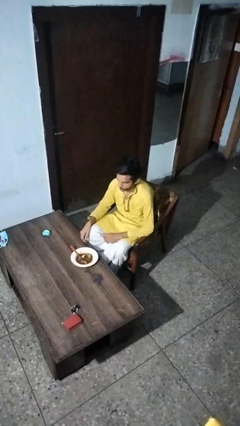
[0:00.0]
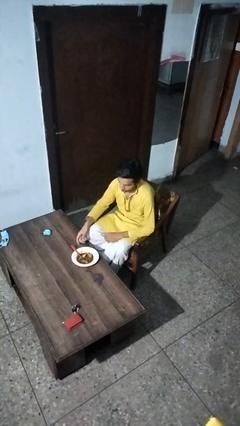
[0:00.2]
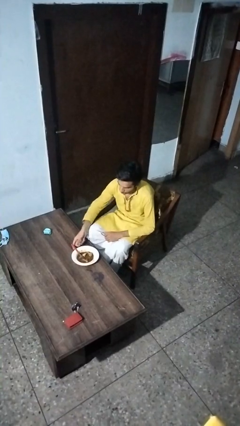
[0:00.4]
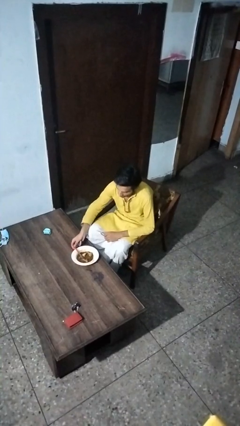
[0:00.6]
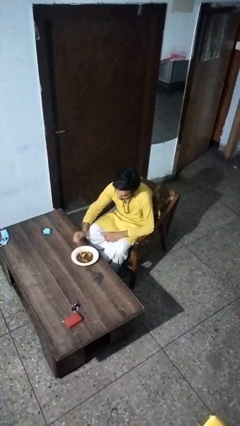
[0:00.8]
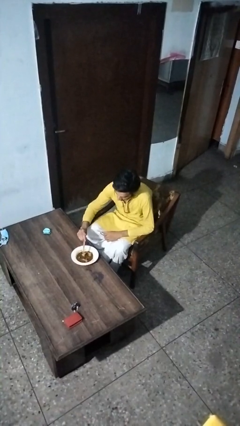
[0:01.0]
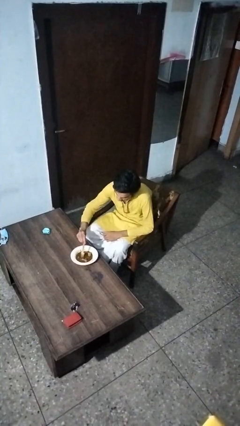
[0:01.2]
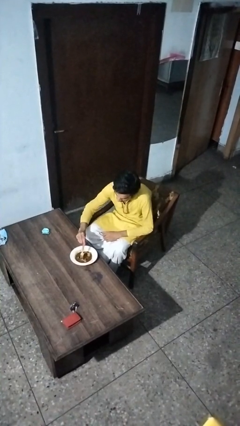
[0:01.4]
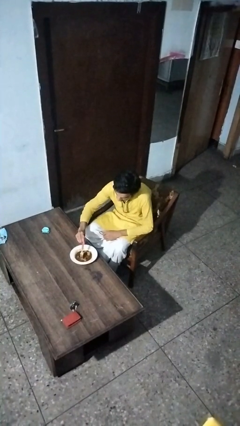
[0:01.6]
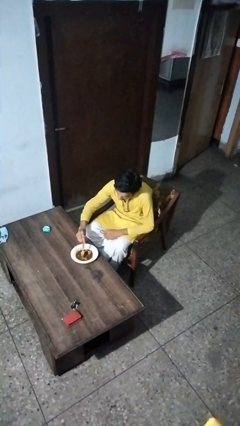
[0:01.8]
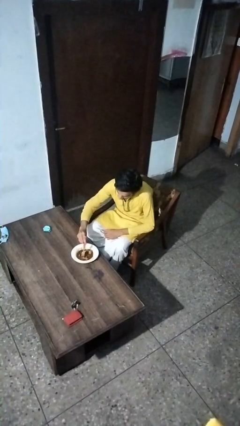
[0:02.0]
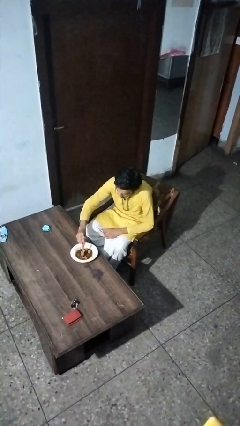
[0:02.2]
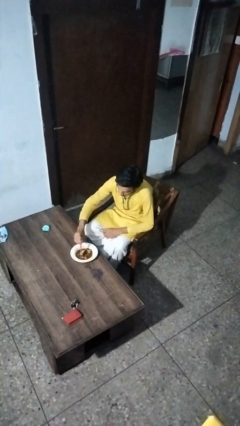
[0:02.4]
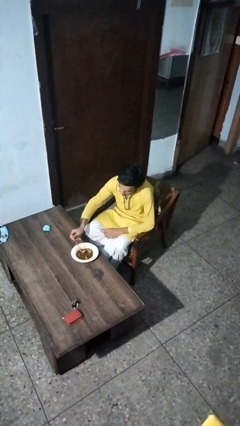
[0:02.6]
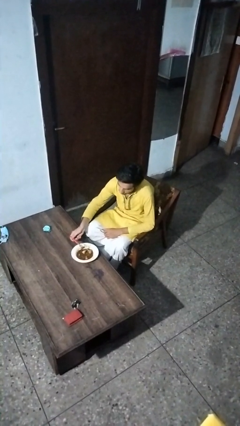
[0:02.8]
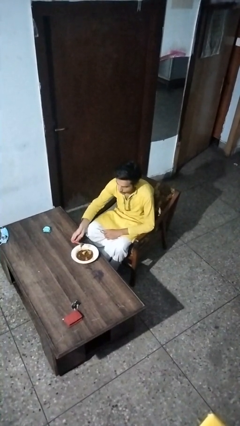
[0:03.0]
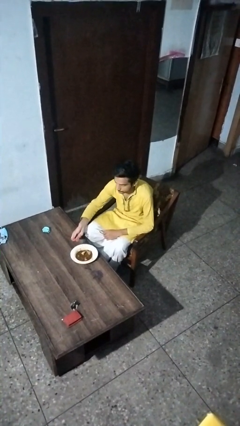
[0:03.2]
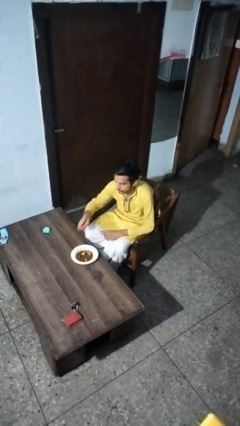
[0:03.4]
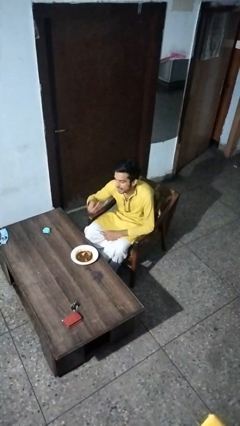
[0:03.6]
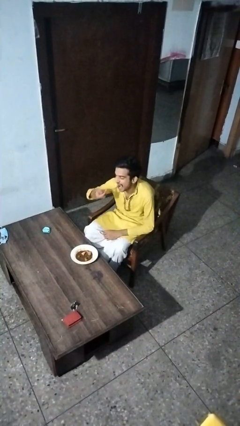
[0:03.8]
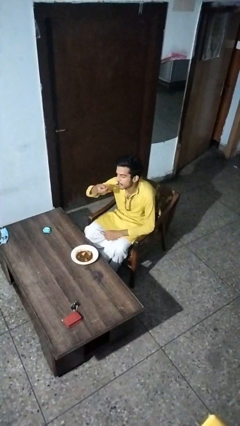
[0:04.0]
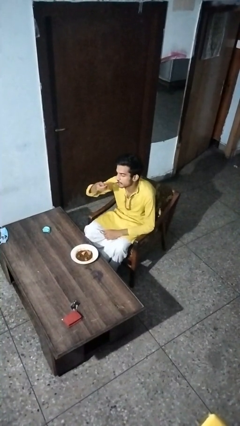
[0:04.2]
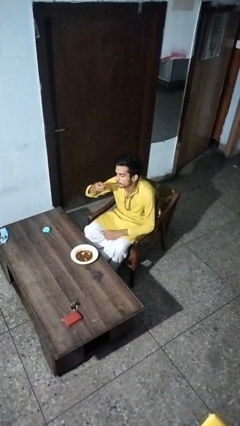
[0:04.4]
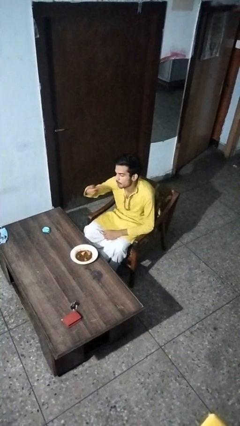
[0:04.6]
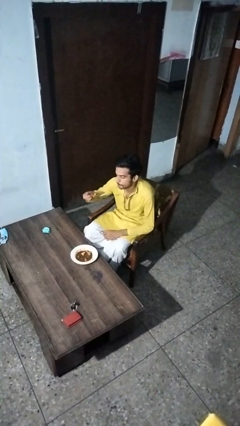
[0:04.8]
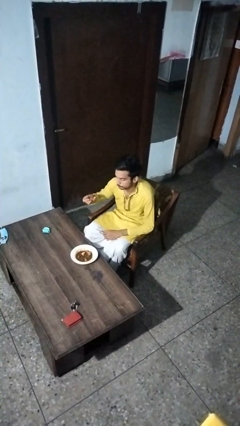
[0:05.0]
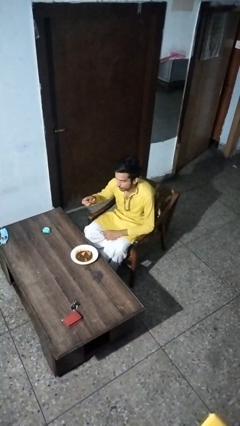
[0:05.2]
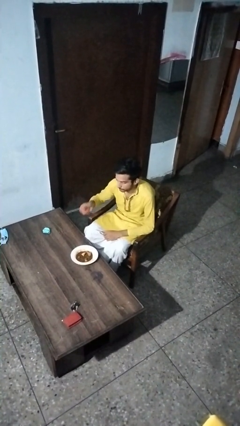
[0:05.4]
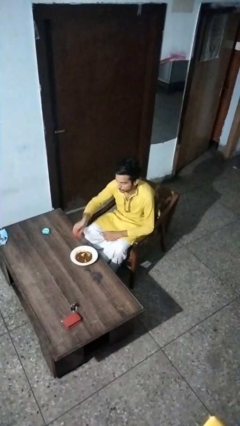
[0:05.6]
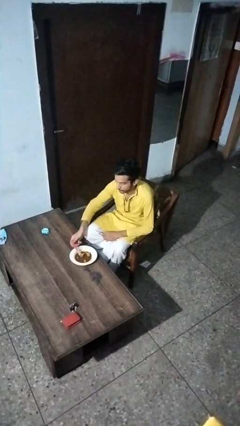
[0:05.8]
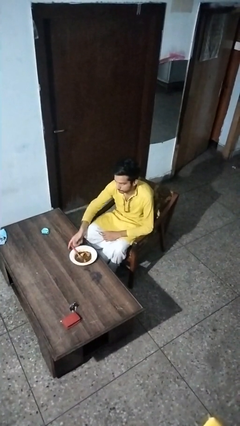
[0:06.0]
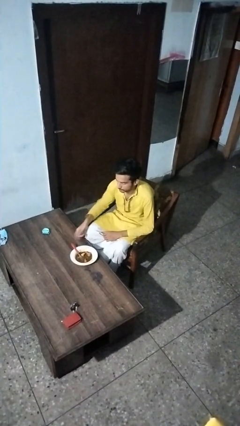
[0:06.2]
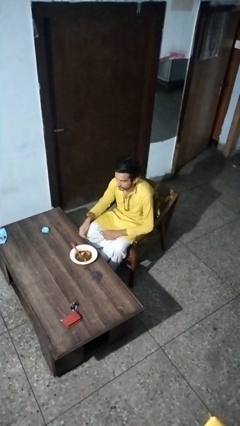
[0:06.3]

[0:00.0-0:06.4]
person eats with utensil

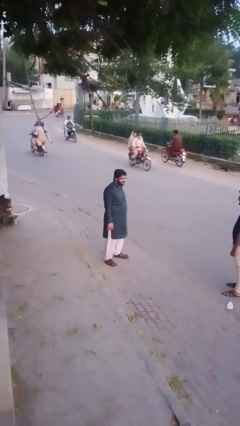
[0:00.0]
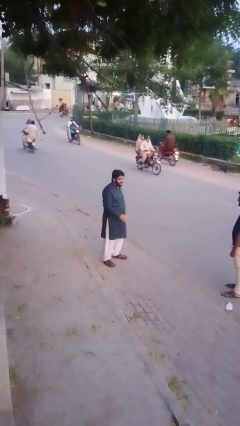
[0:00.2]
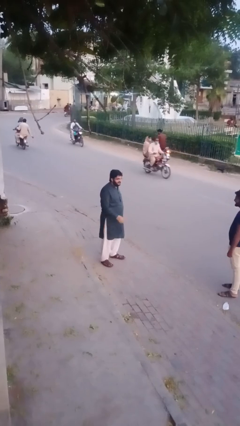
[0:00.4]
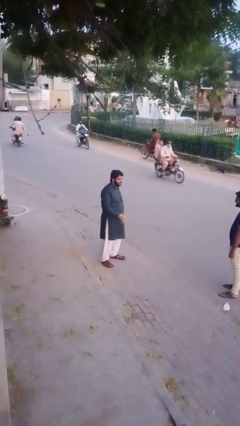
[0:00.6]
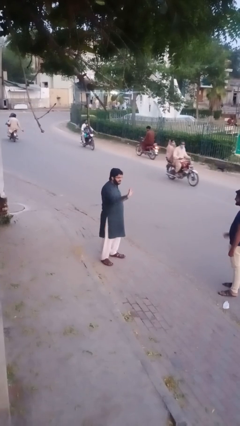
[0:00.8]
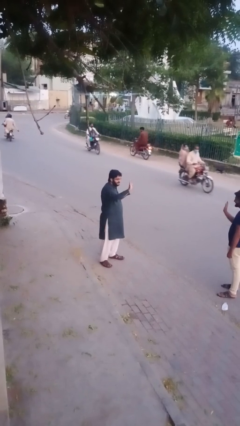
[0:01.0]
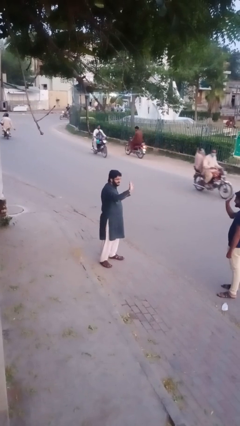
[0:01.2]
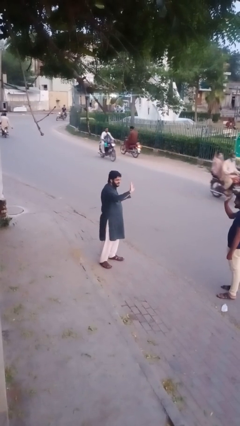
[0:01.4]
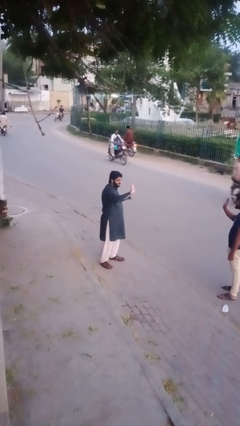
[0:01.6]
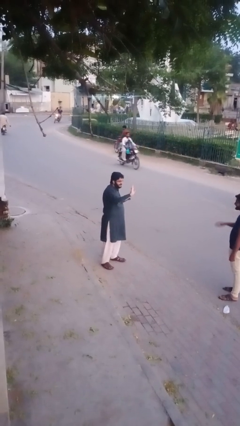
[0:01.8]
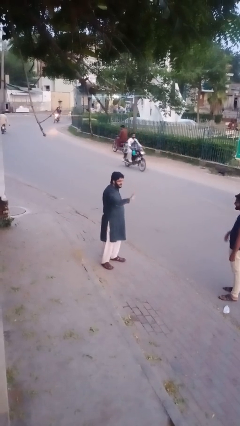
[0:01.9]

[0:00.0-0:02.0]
person waves at person

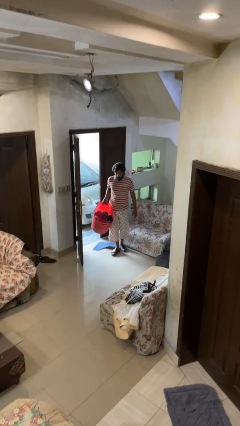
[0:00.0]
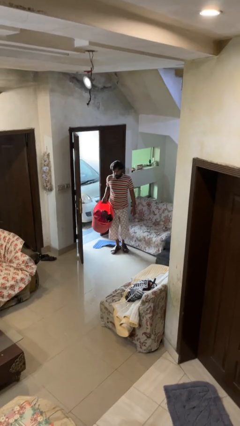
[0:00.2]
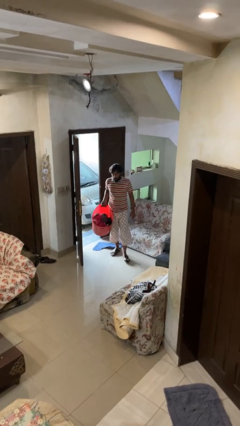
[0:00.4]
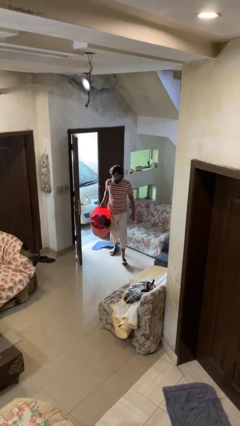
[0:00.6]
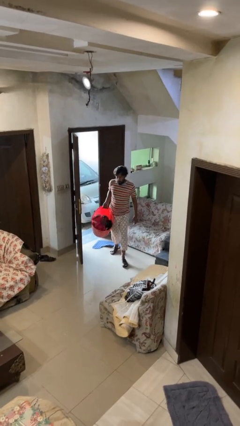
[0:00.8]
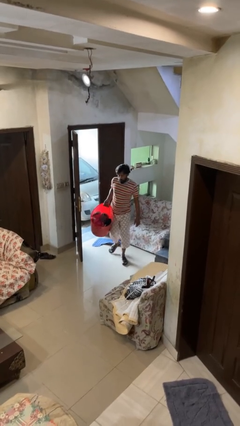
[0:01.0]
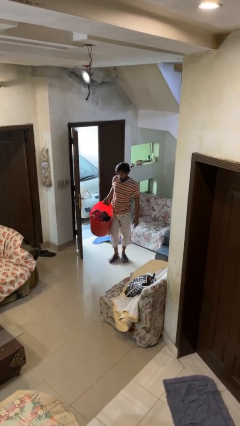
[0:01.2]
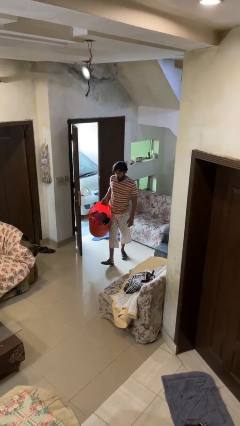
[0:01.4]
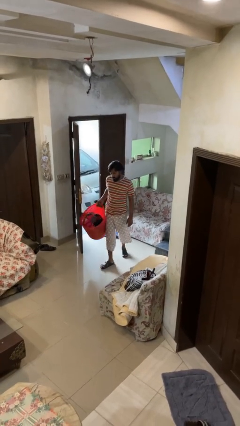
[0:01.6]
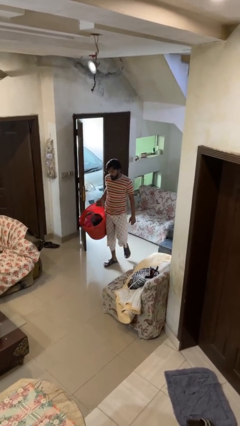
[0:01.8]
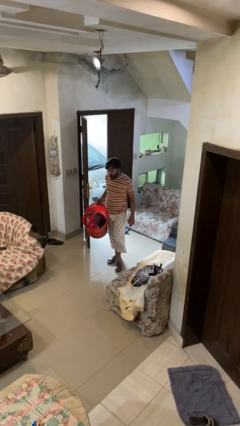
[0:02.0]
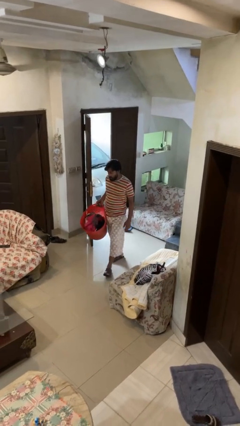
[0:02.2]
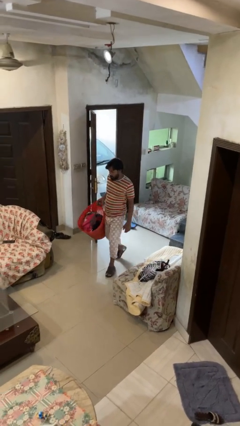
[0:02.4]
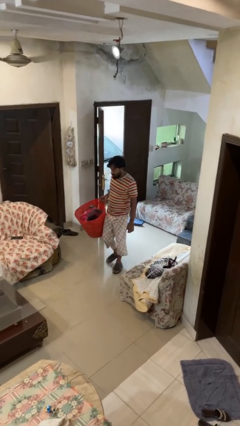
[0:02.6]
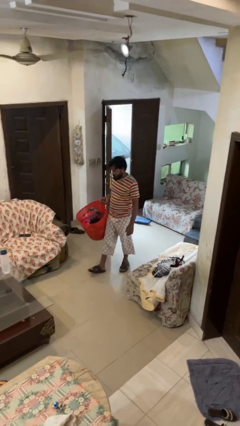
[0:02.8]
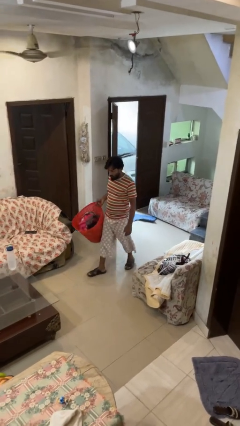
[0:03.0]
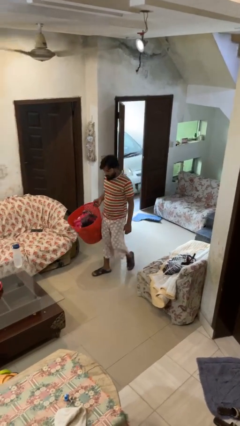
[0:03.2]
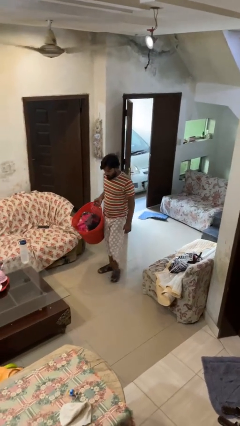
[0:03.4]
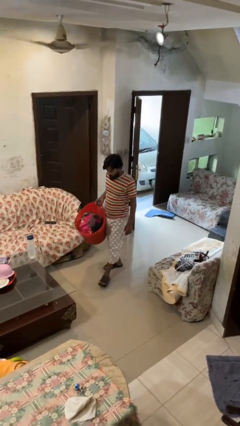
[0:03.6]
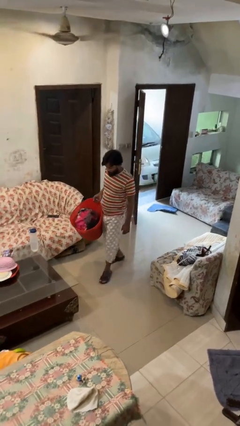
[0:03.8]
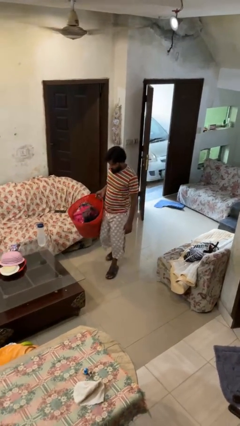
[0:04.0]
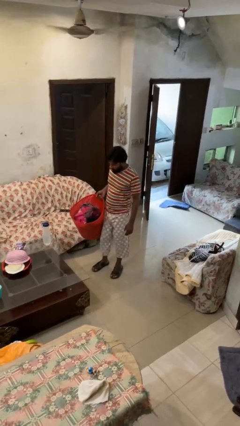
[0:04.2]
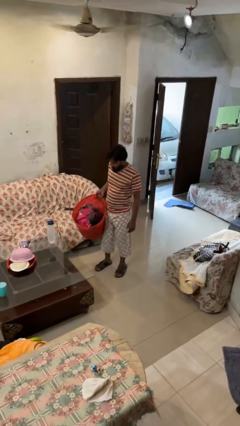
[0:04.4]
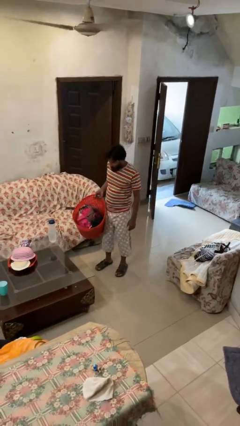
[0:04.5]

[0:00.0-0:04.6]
person carries laundry basket

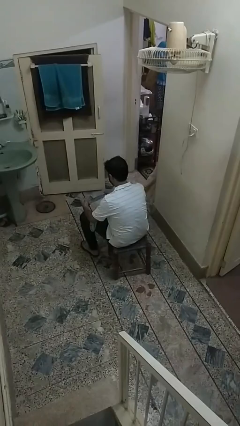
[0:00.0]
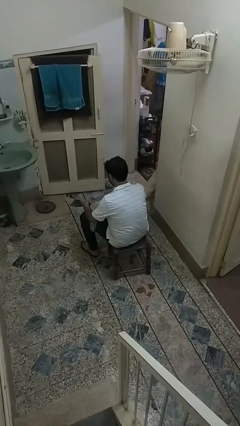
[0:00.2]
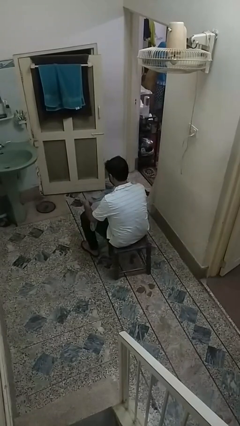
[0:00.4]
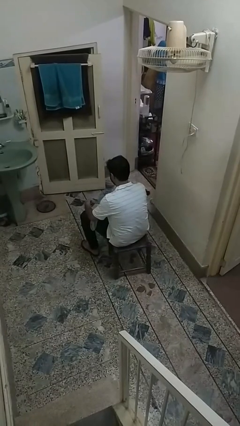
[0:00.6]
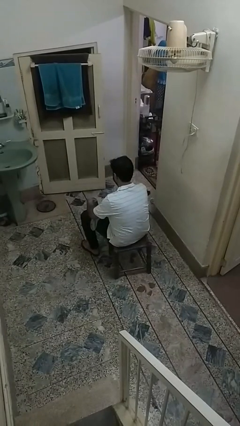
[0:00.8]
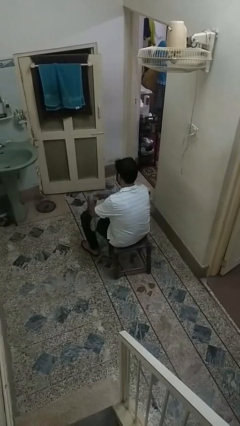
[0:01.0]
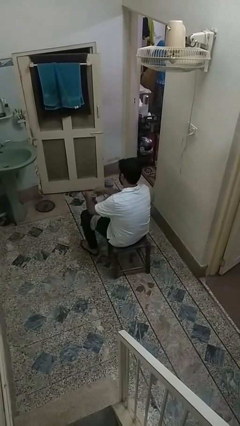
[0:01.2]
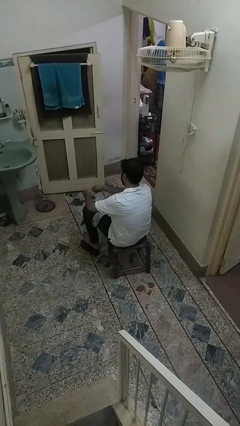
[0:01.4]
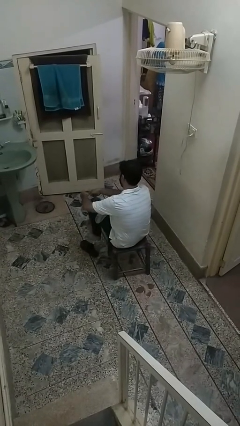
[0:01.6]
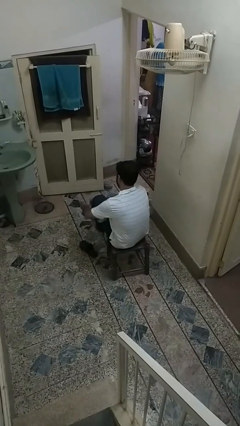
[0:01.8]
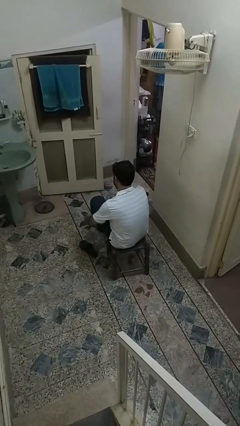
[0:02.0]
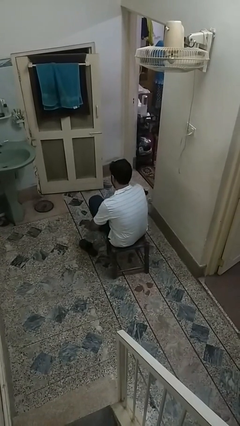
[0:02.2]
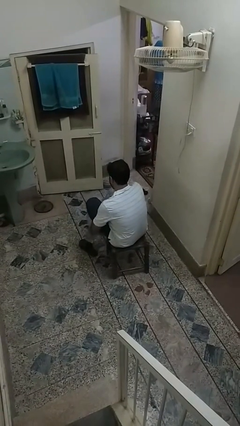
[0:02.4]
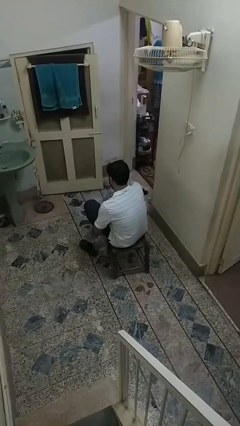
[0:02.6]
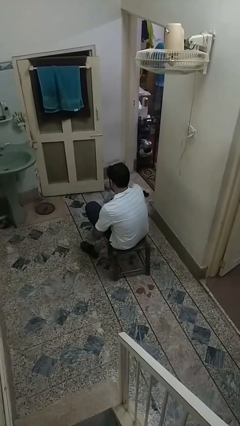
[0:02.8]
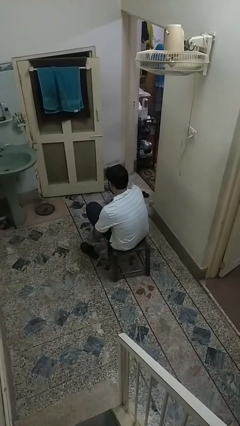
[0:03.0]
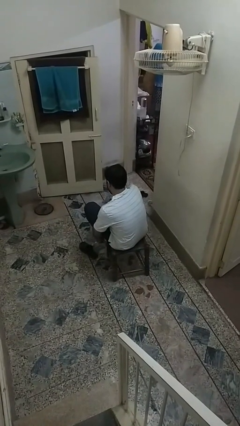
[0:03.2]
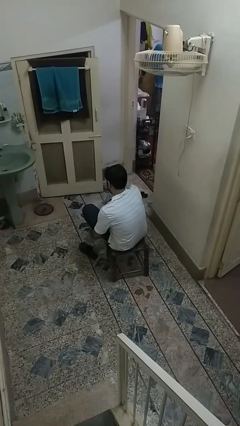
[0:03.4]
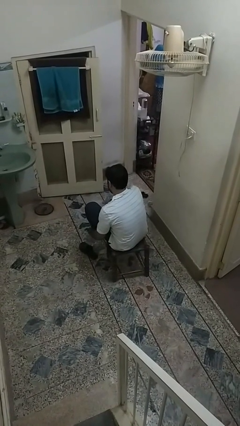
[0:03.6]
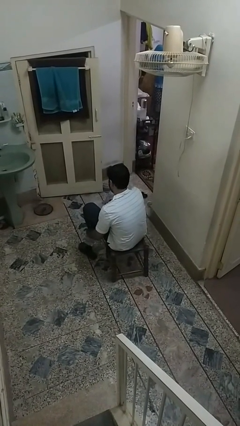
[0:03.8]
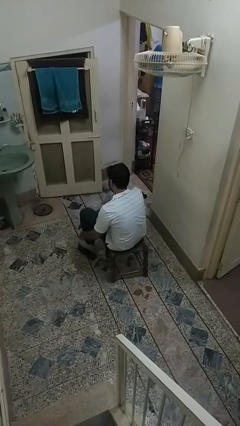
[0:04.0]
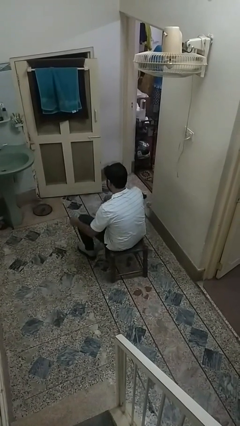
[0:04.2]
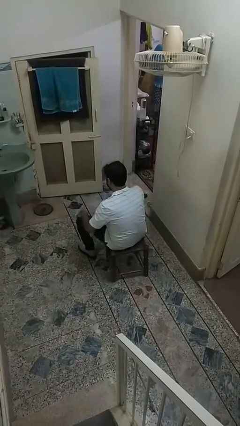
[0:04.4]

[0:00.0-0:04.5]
person puts on socks
